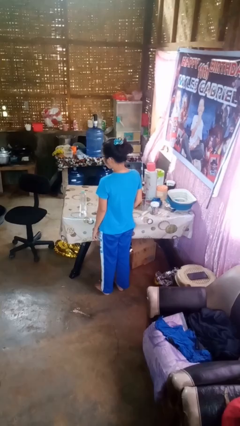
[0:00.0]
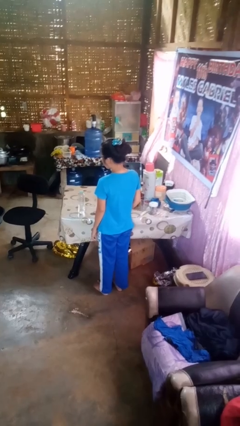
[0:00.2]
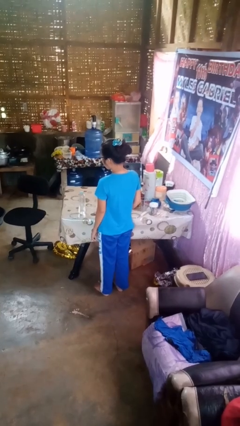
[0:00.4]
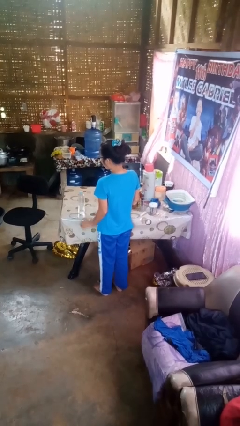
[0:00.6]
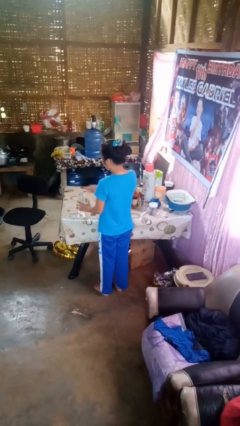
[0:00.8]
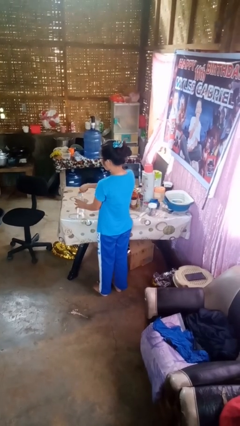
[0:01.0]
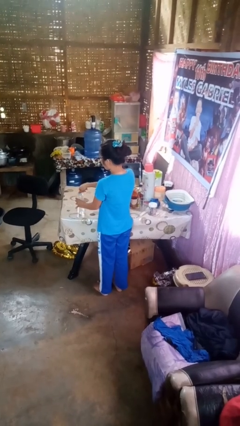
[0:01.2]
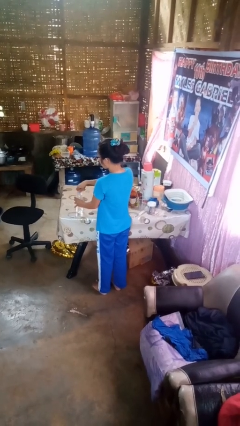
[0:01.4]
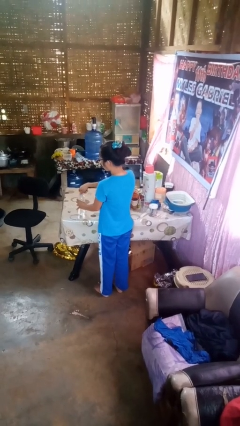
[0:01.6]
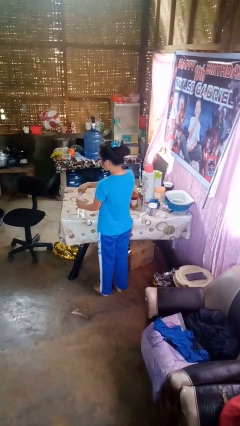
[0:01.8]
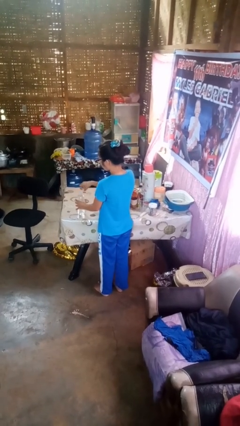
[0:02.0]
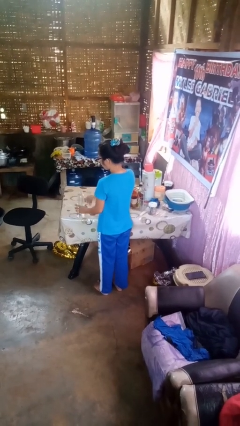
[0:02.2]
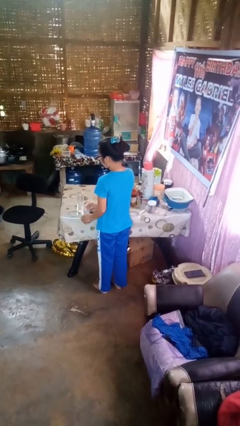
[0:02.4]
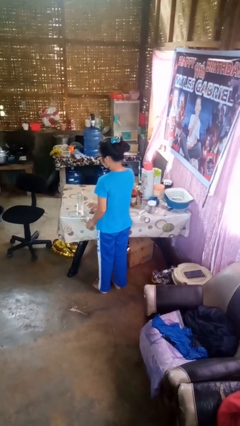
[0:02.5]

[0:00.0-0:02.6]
person unscrews lid from bottle

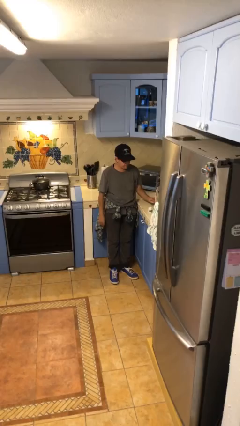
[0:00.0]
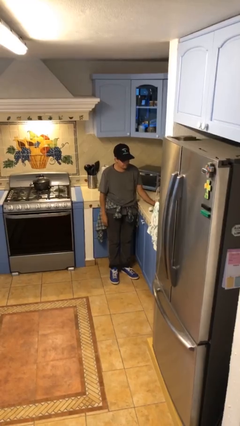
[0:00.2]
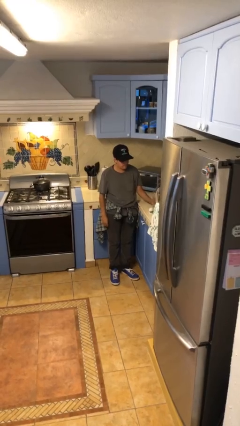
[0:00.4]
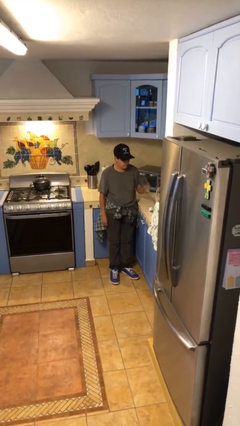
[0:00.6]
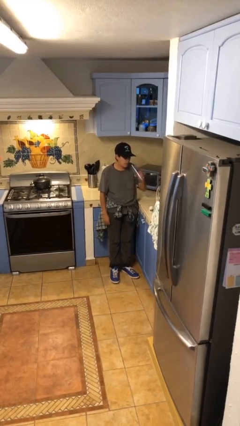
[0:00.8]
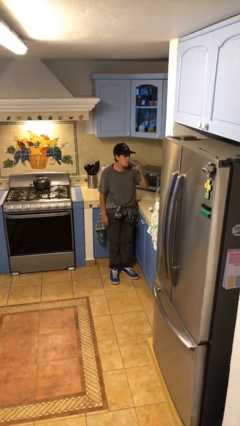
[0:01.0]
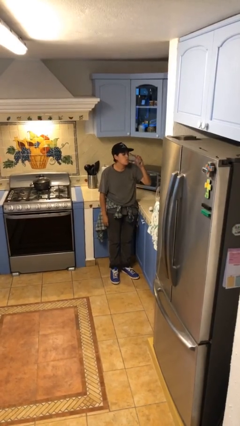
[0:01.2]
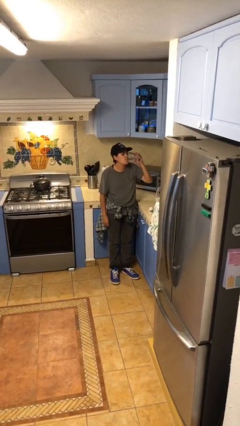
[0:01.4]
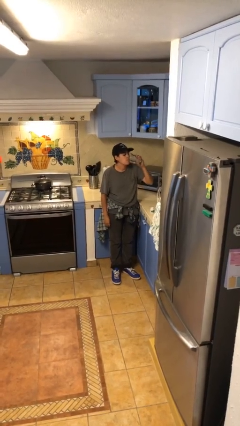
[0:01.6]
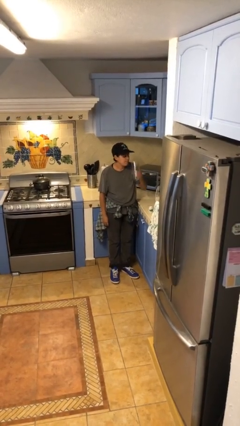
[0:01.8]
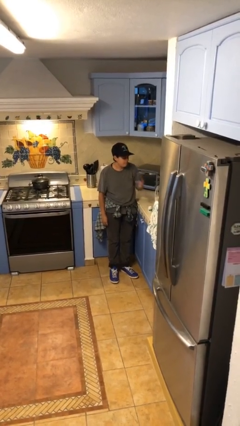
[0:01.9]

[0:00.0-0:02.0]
person drinks from cup

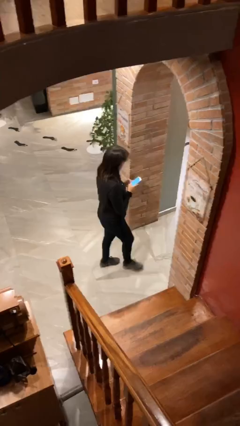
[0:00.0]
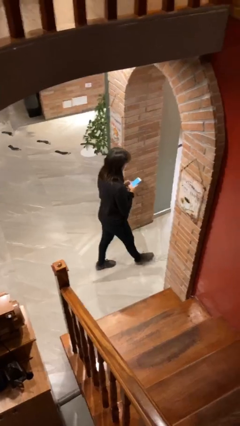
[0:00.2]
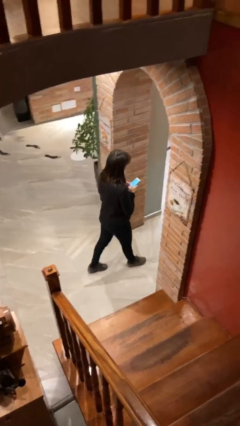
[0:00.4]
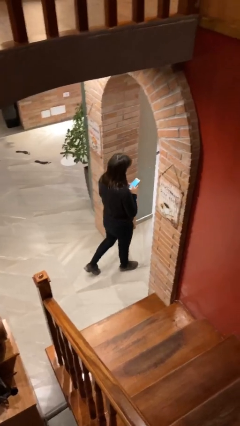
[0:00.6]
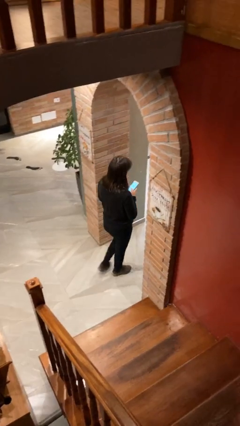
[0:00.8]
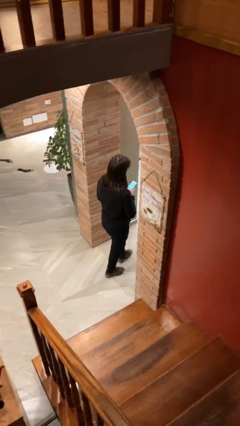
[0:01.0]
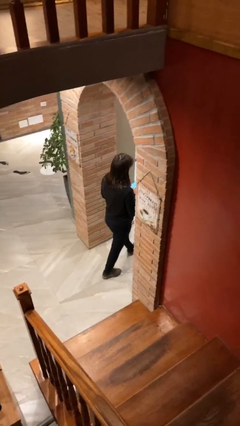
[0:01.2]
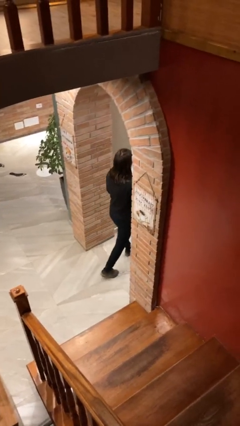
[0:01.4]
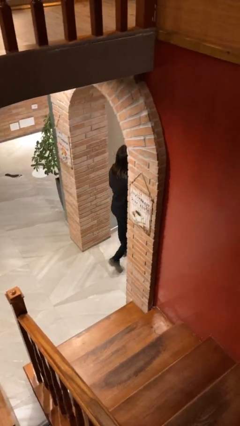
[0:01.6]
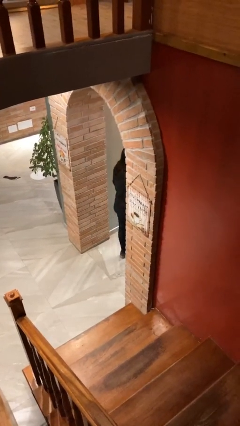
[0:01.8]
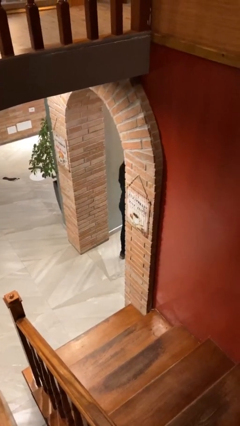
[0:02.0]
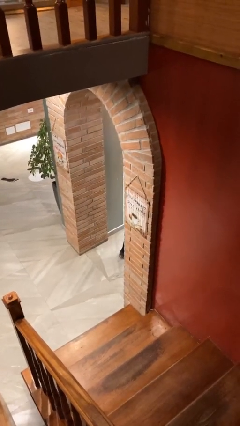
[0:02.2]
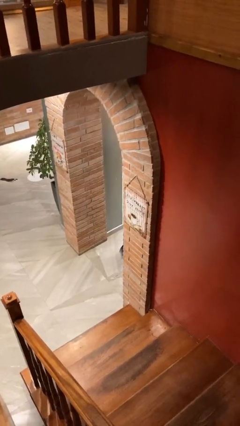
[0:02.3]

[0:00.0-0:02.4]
person exits scene through structure

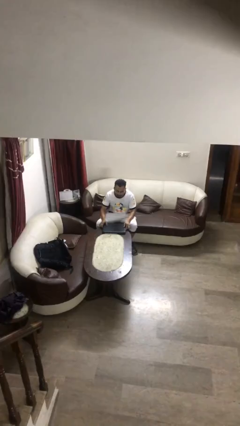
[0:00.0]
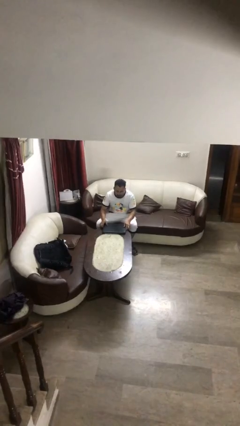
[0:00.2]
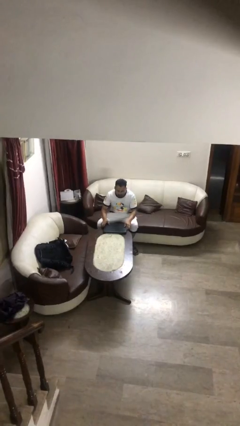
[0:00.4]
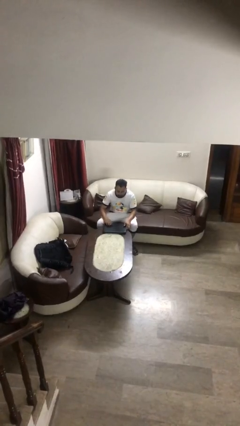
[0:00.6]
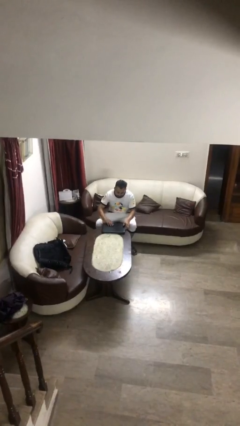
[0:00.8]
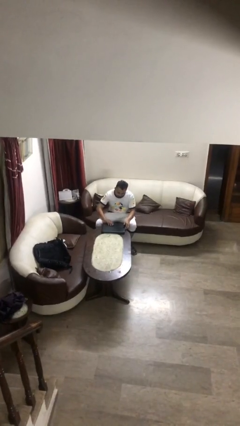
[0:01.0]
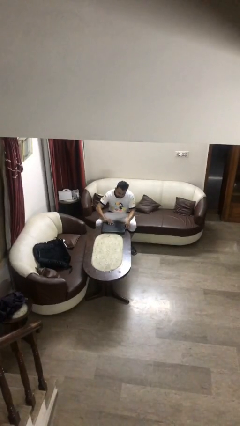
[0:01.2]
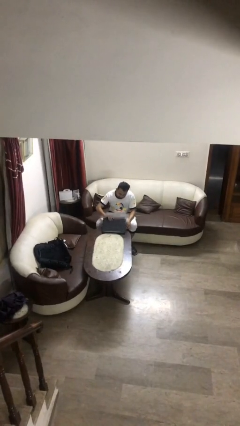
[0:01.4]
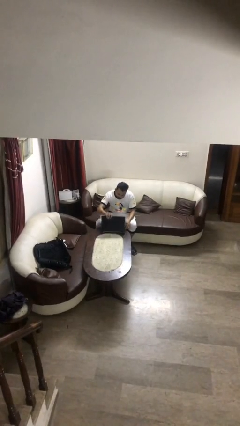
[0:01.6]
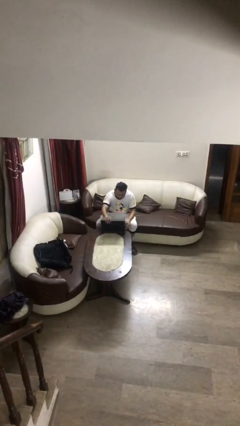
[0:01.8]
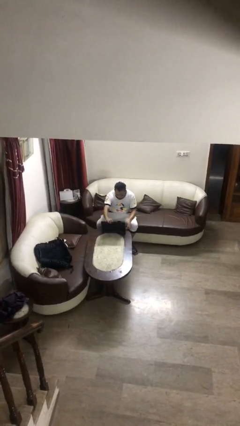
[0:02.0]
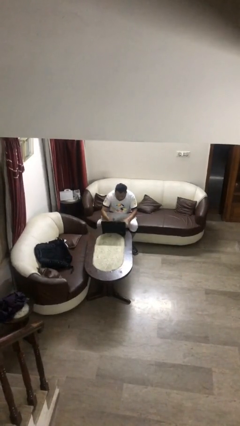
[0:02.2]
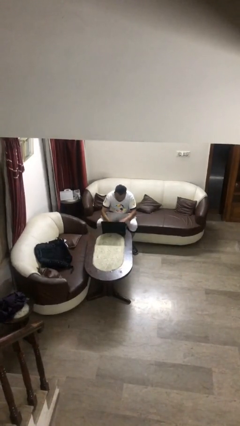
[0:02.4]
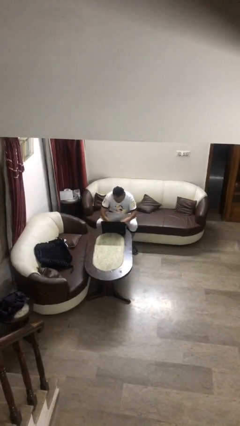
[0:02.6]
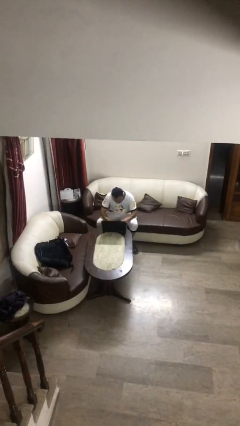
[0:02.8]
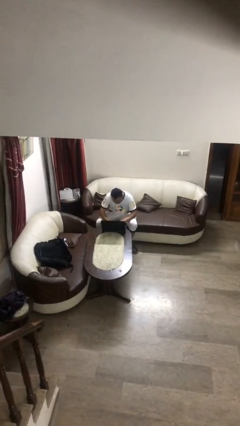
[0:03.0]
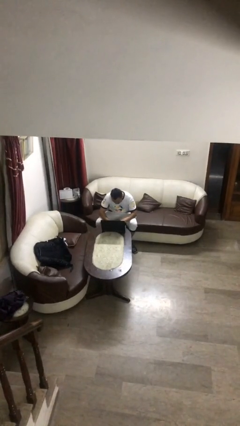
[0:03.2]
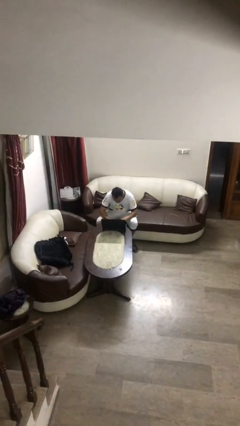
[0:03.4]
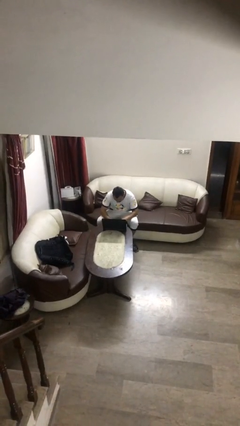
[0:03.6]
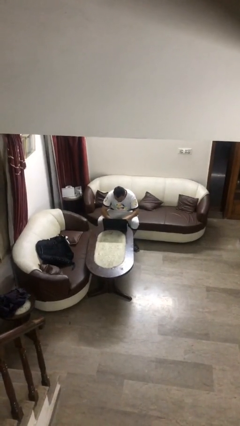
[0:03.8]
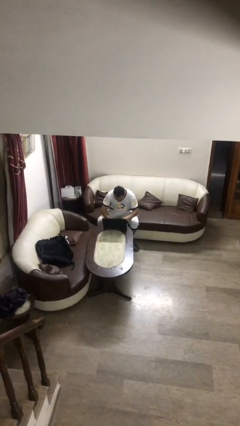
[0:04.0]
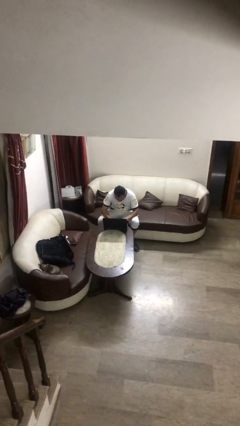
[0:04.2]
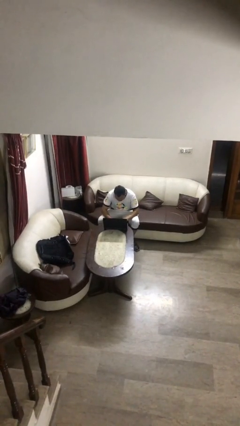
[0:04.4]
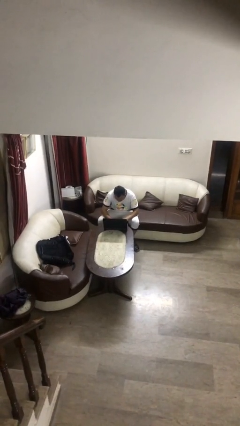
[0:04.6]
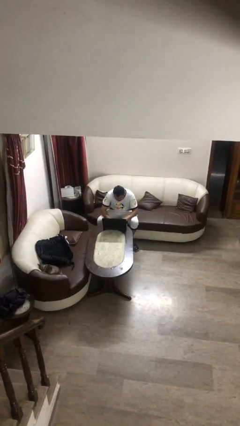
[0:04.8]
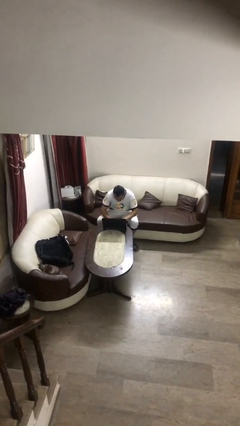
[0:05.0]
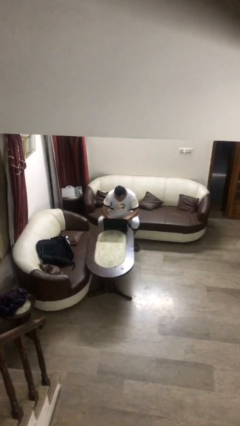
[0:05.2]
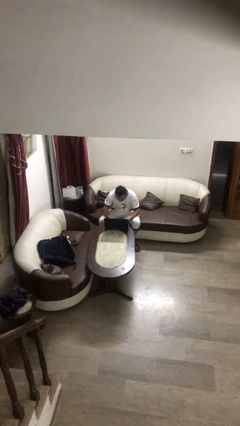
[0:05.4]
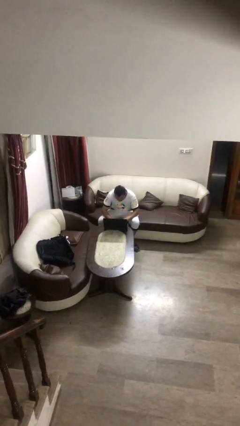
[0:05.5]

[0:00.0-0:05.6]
person interacts with laptop

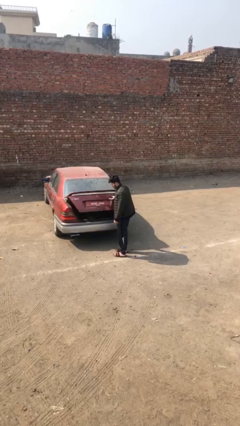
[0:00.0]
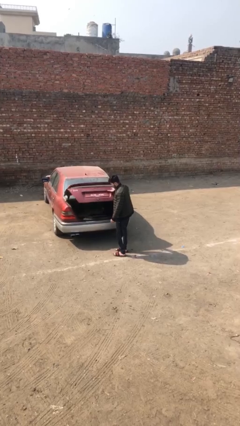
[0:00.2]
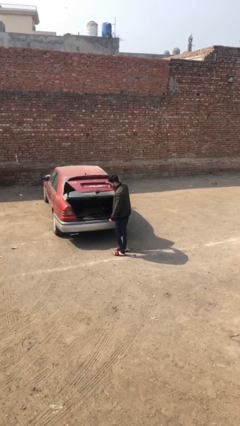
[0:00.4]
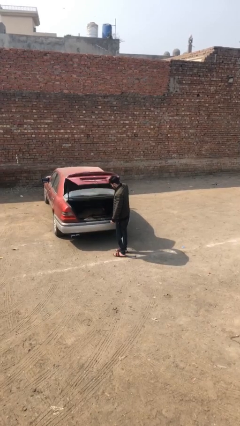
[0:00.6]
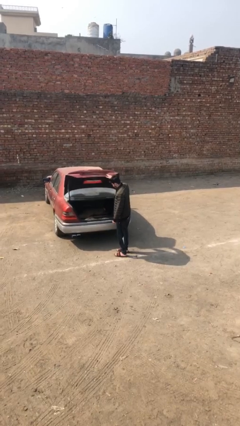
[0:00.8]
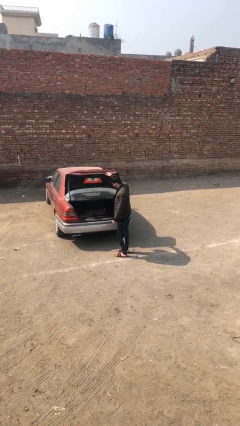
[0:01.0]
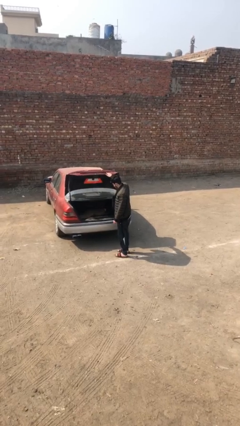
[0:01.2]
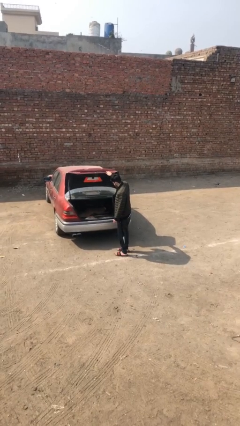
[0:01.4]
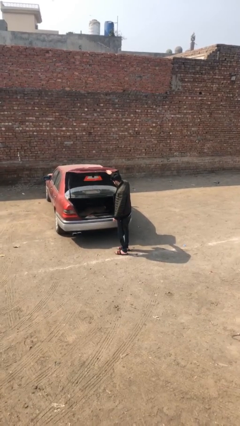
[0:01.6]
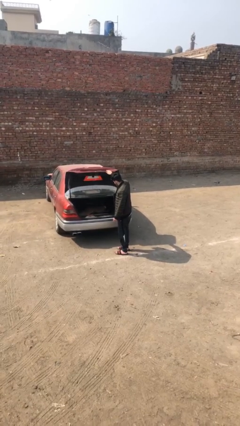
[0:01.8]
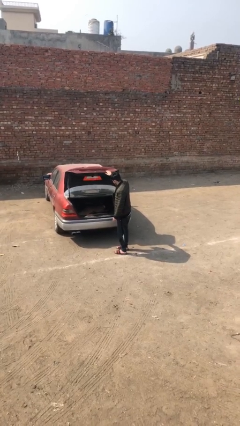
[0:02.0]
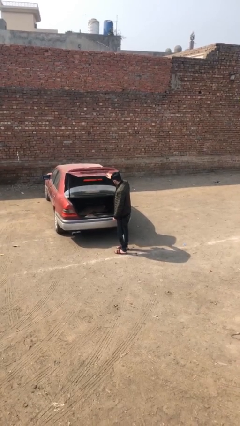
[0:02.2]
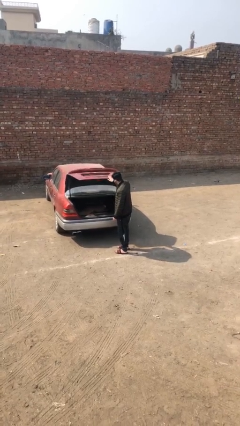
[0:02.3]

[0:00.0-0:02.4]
person opens car trunk

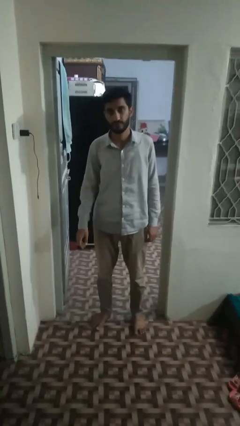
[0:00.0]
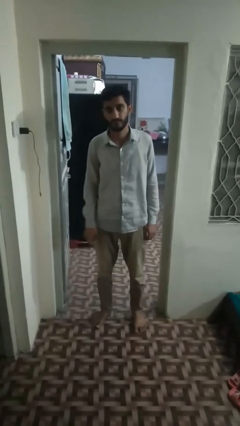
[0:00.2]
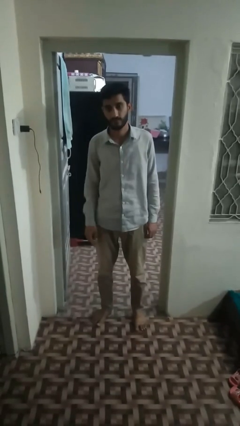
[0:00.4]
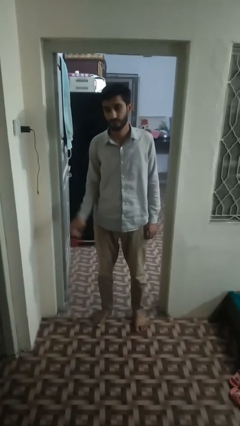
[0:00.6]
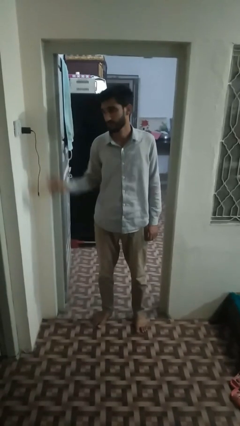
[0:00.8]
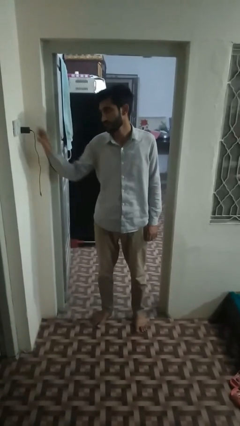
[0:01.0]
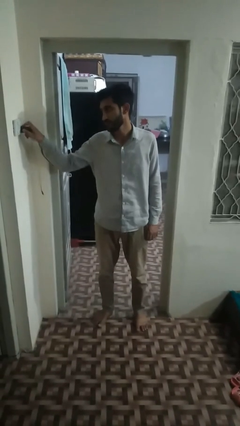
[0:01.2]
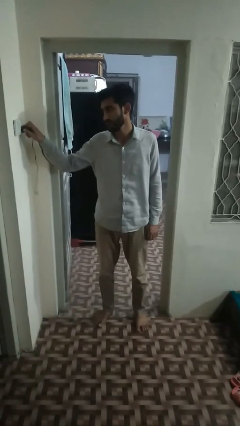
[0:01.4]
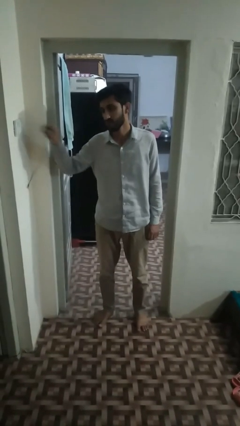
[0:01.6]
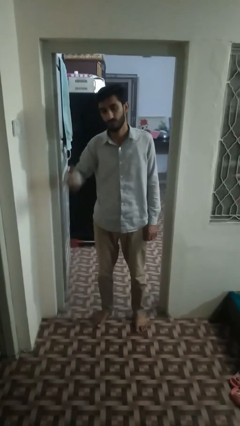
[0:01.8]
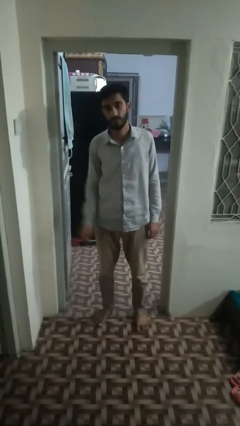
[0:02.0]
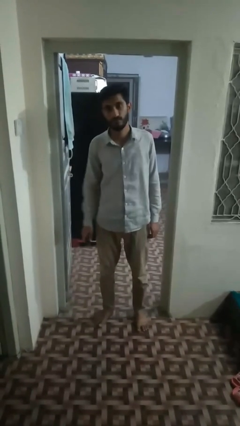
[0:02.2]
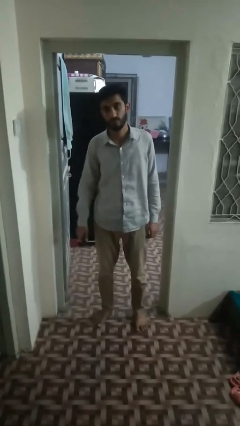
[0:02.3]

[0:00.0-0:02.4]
person unplugs from electrical socket
